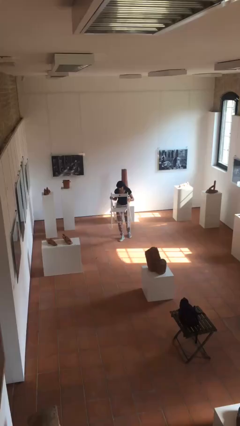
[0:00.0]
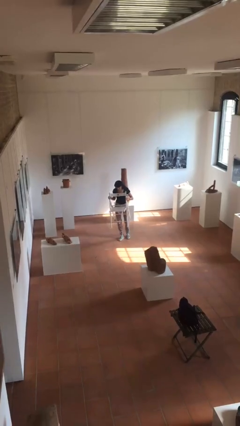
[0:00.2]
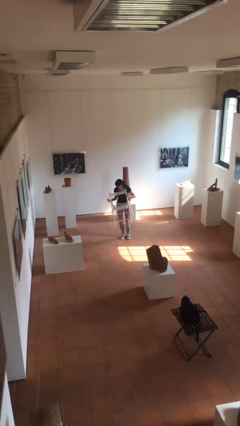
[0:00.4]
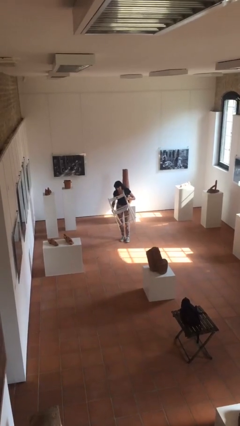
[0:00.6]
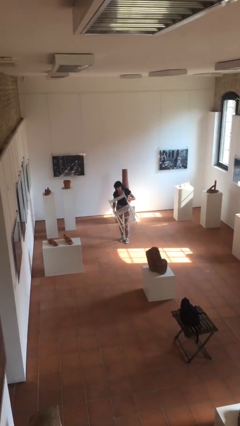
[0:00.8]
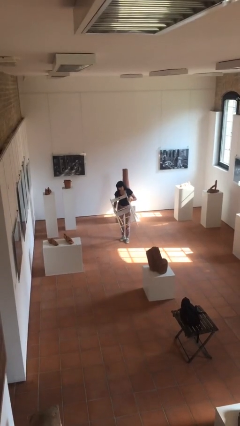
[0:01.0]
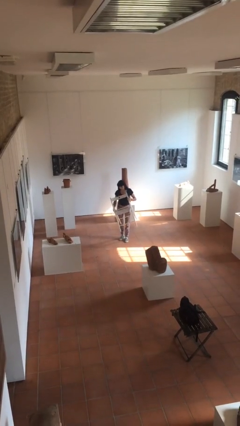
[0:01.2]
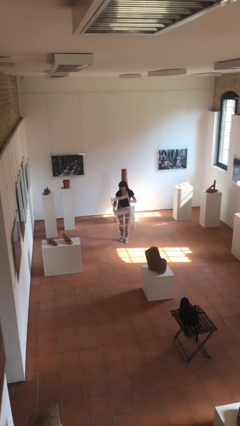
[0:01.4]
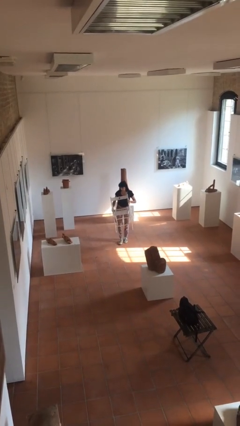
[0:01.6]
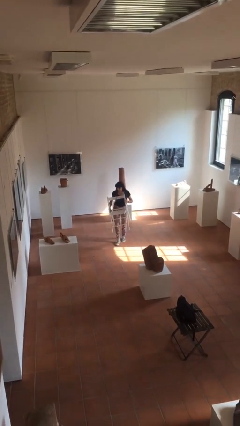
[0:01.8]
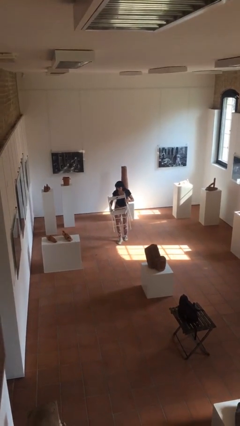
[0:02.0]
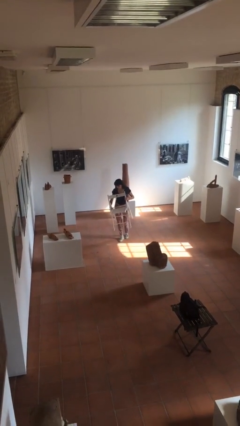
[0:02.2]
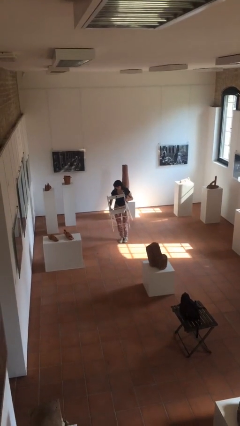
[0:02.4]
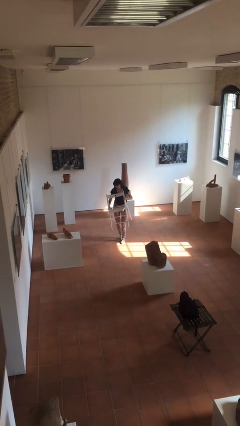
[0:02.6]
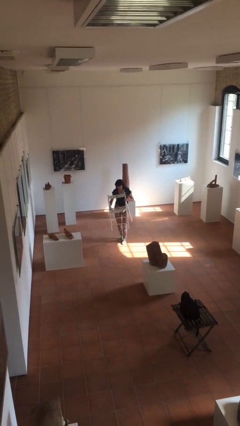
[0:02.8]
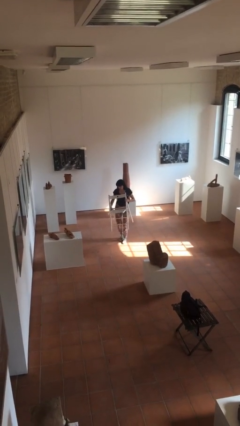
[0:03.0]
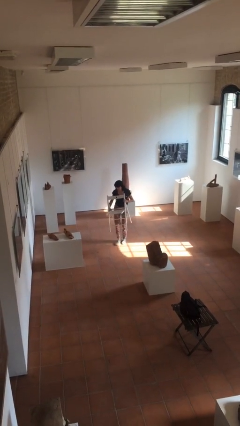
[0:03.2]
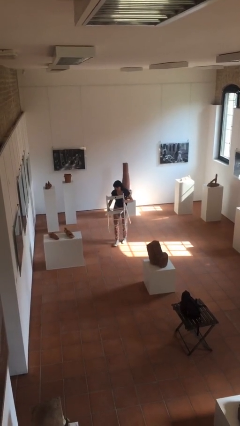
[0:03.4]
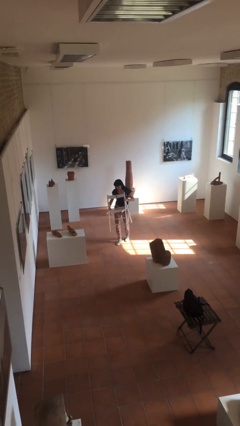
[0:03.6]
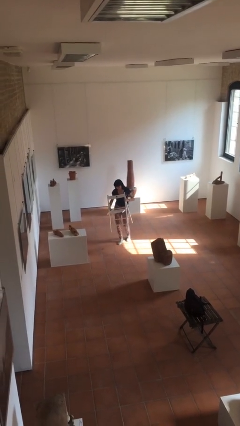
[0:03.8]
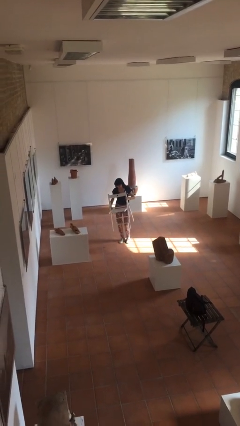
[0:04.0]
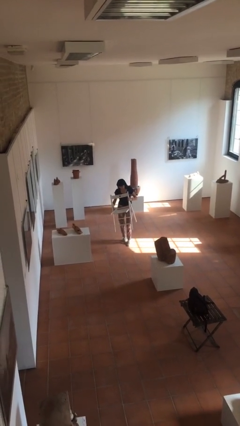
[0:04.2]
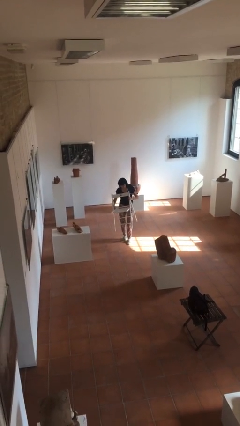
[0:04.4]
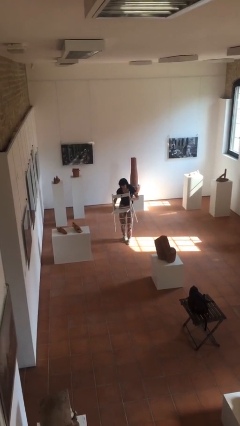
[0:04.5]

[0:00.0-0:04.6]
person carries heavy object

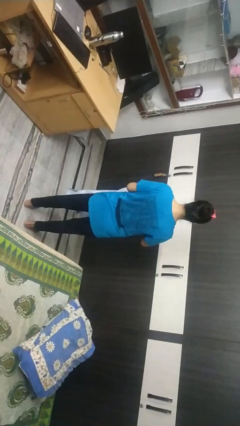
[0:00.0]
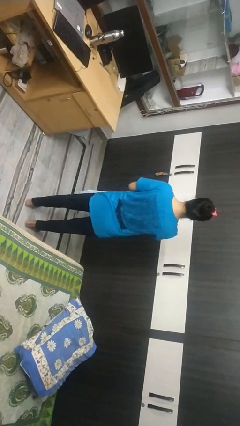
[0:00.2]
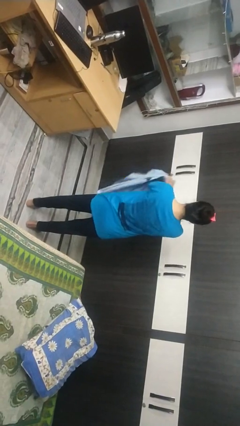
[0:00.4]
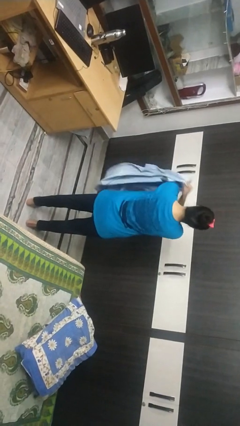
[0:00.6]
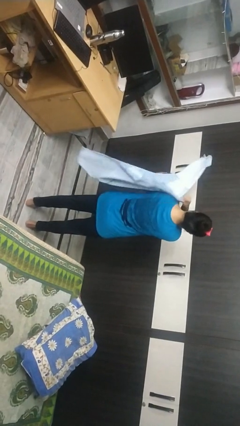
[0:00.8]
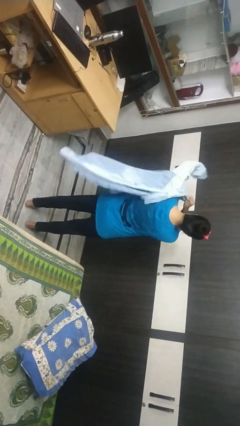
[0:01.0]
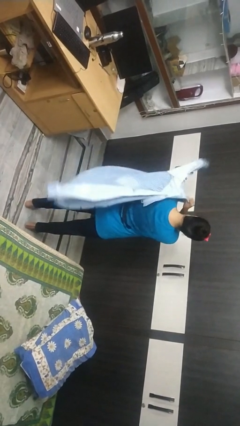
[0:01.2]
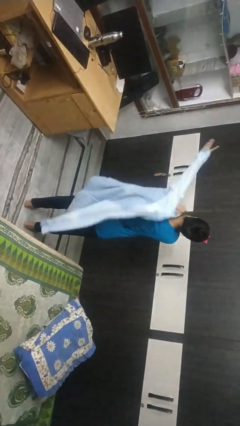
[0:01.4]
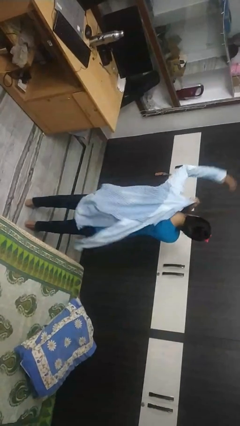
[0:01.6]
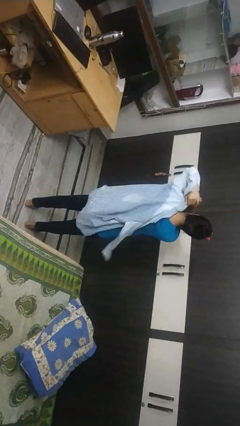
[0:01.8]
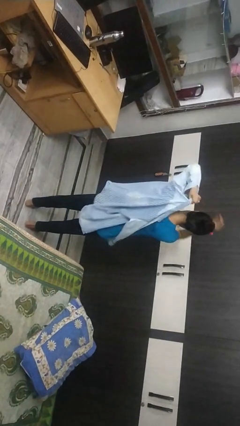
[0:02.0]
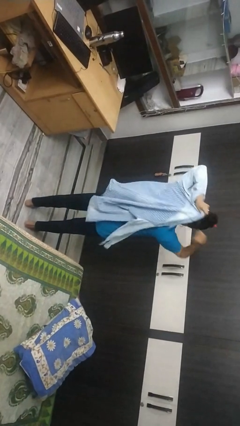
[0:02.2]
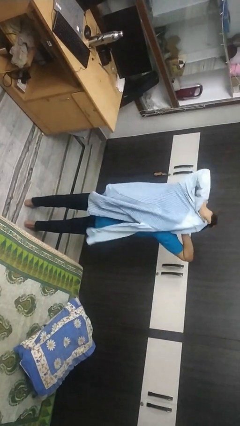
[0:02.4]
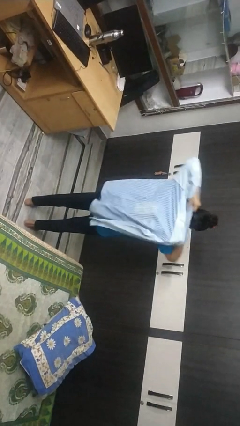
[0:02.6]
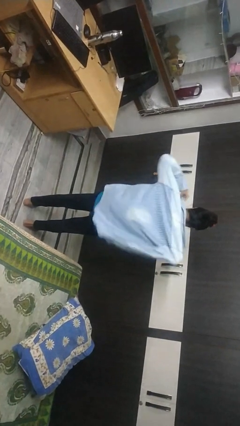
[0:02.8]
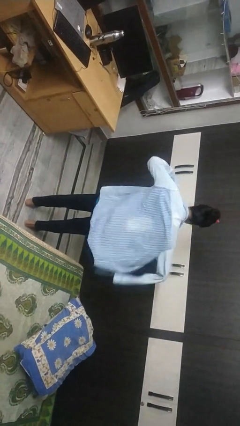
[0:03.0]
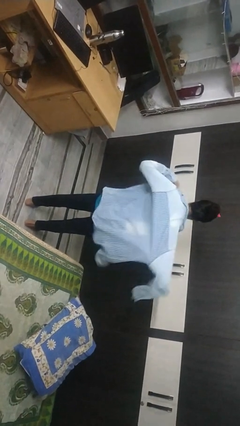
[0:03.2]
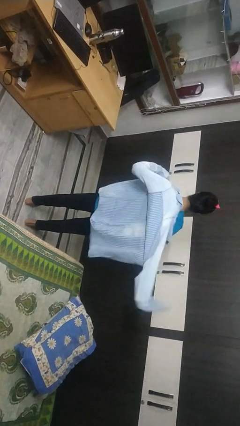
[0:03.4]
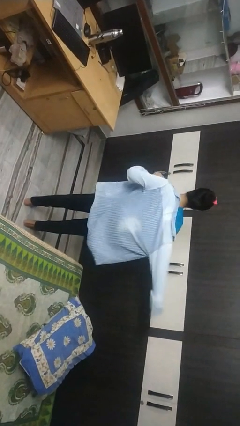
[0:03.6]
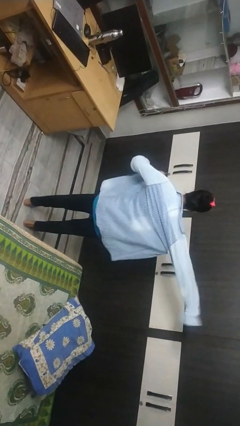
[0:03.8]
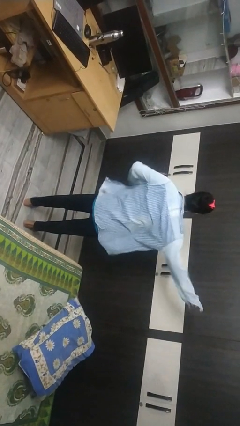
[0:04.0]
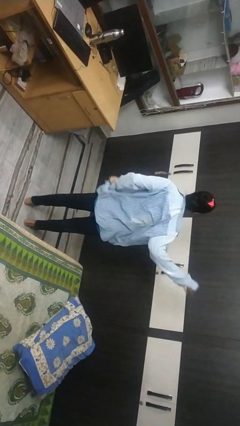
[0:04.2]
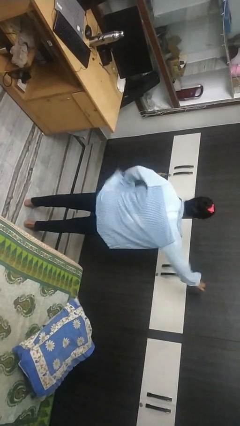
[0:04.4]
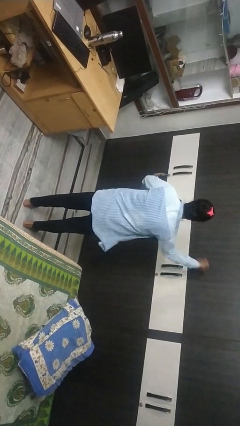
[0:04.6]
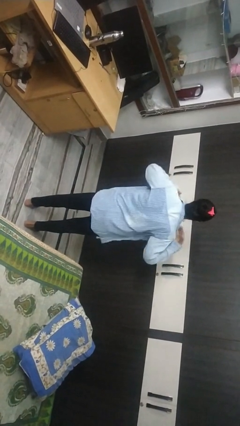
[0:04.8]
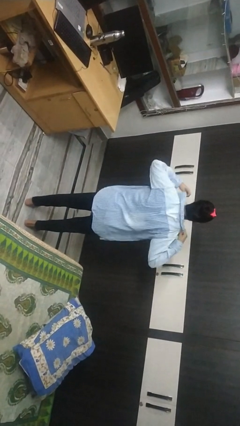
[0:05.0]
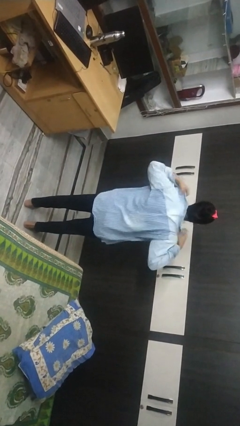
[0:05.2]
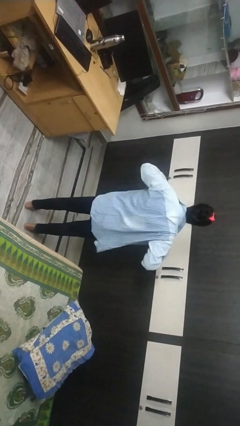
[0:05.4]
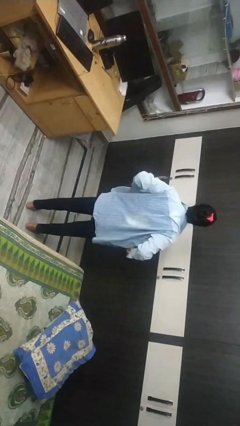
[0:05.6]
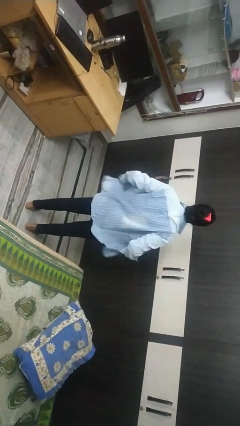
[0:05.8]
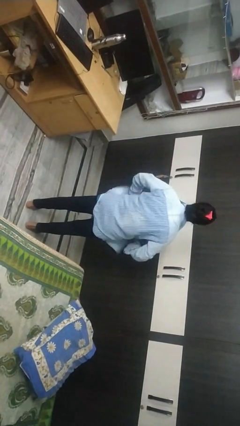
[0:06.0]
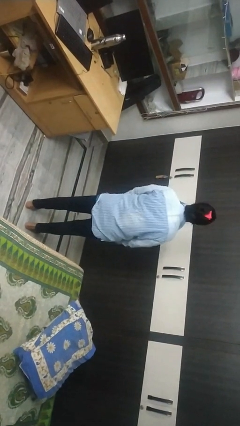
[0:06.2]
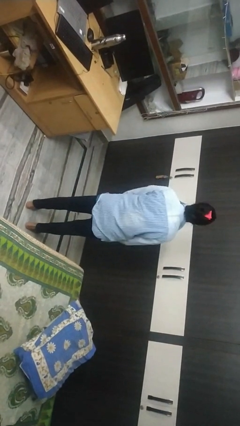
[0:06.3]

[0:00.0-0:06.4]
person puts on shirt

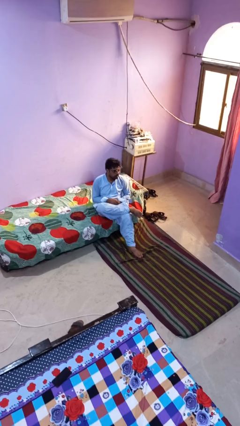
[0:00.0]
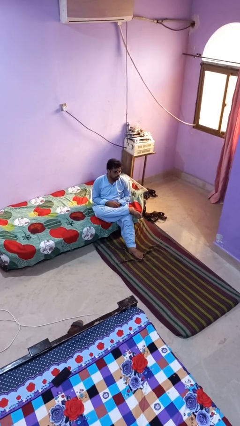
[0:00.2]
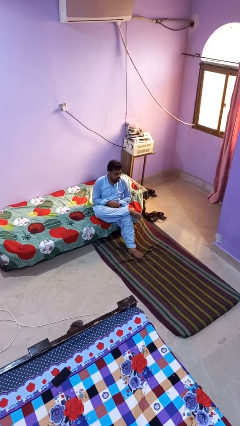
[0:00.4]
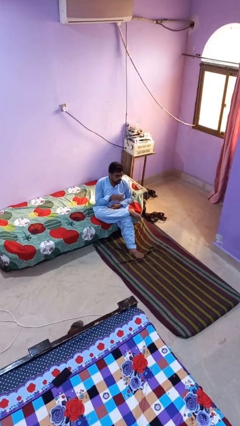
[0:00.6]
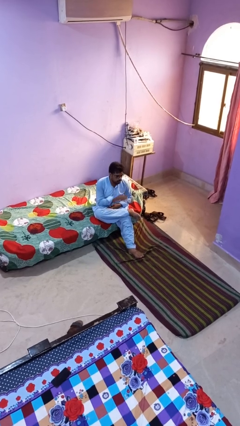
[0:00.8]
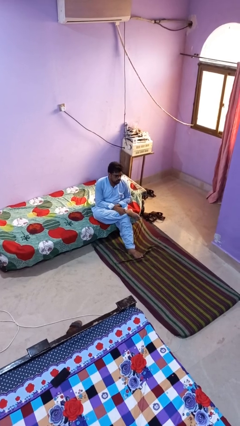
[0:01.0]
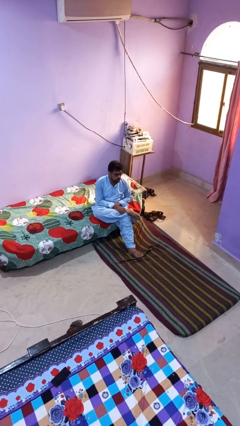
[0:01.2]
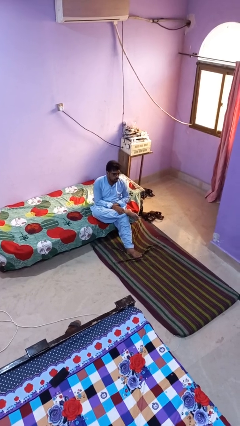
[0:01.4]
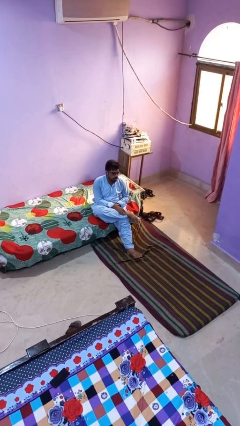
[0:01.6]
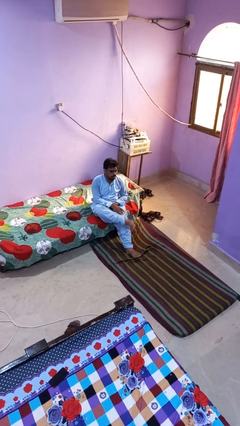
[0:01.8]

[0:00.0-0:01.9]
person crosses legs

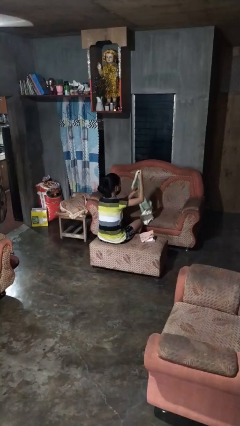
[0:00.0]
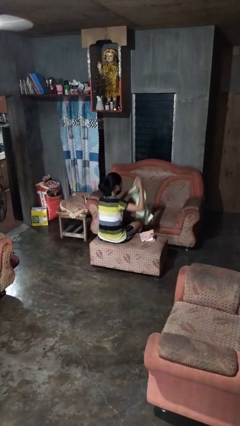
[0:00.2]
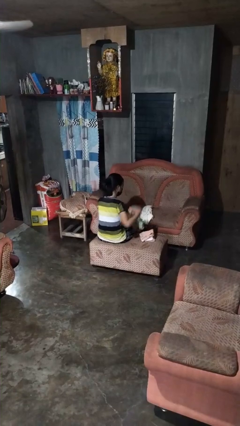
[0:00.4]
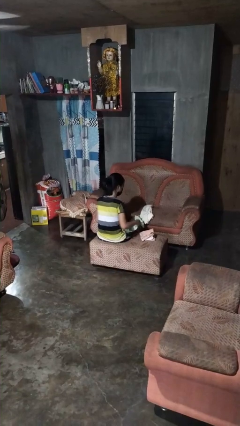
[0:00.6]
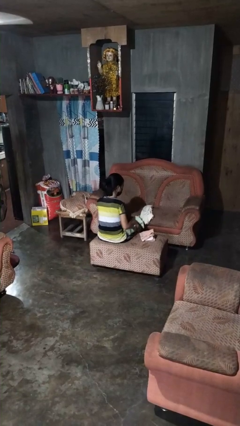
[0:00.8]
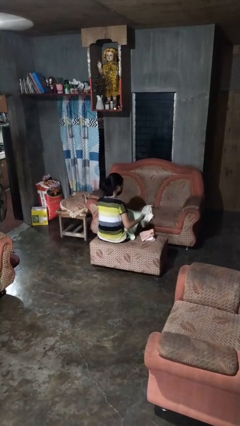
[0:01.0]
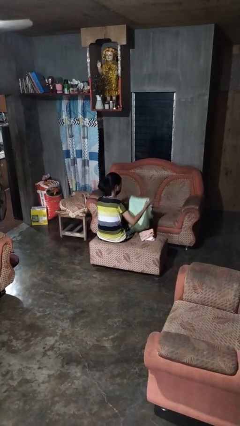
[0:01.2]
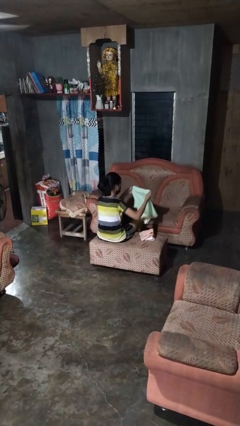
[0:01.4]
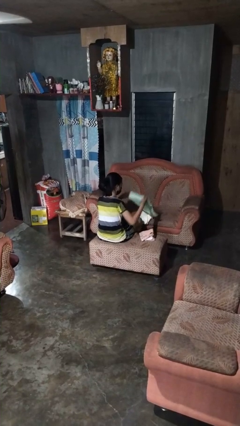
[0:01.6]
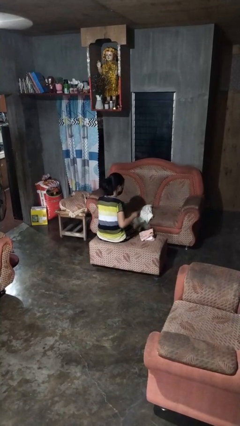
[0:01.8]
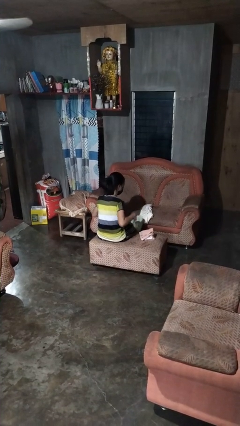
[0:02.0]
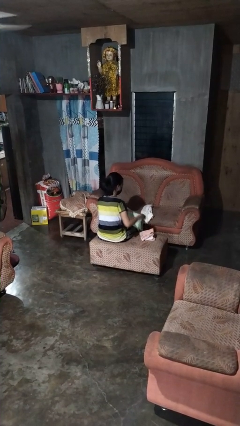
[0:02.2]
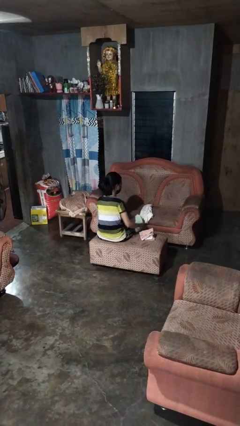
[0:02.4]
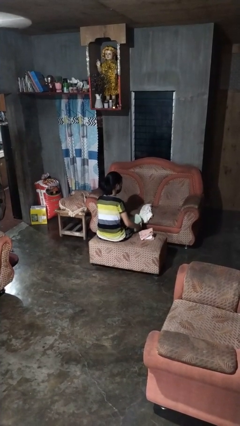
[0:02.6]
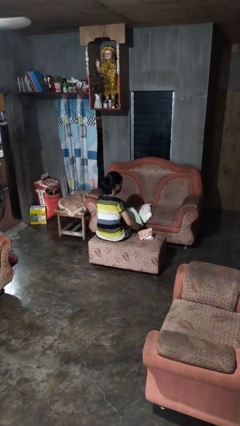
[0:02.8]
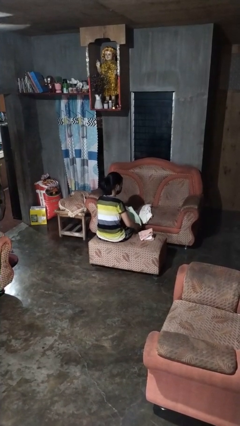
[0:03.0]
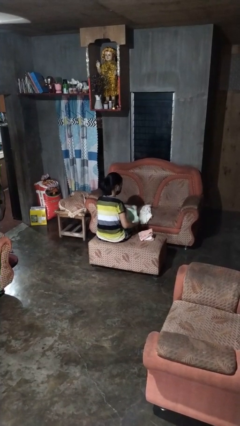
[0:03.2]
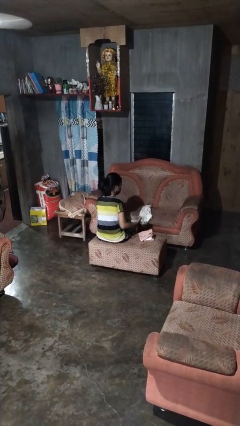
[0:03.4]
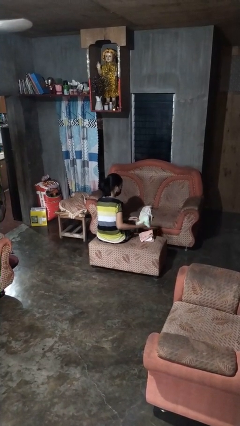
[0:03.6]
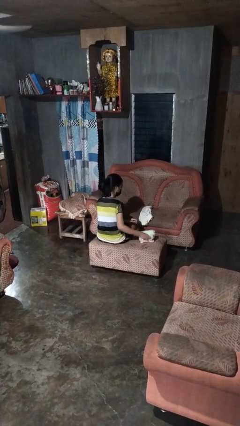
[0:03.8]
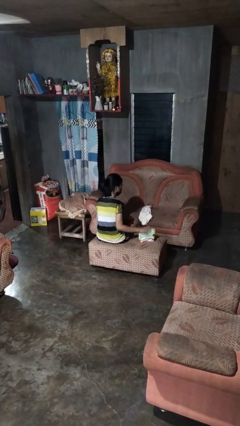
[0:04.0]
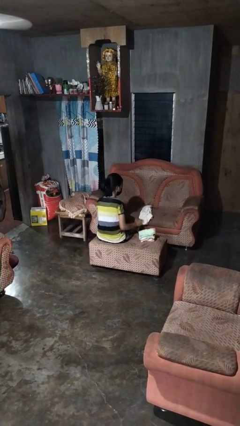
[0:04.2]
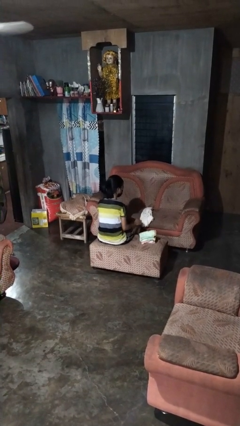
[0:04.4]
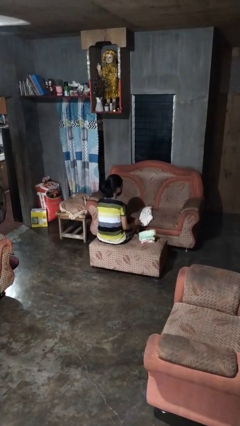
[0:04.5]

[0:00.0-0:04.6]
person folds towel

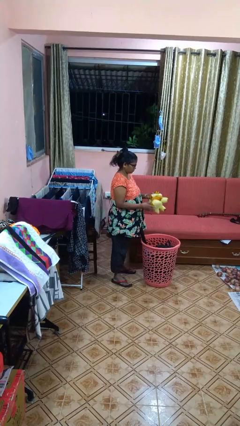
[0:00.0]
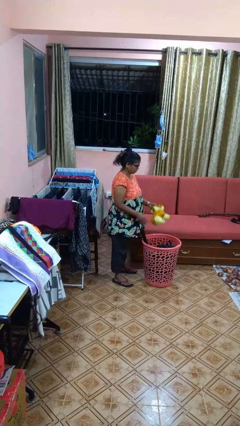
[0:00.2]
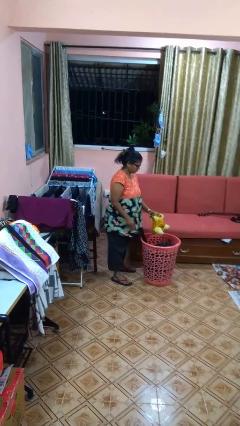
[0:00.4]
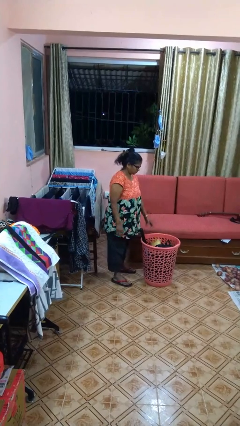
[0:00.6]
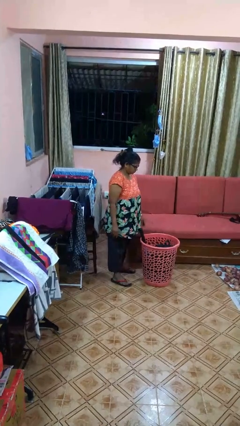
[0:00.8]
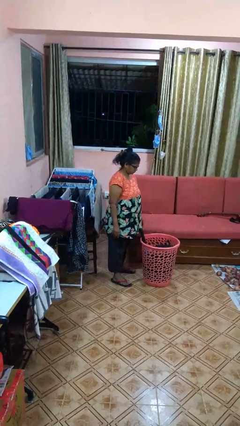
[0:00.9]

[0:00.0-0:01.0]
person puts object into basket
